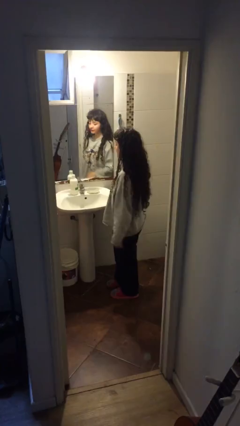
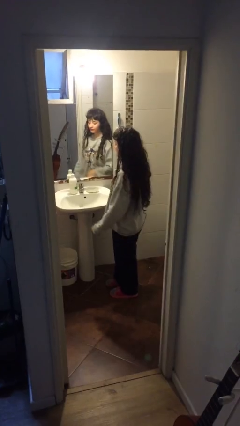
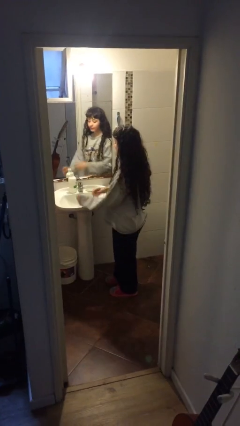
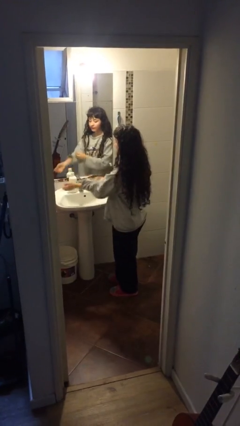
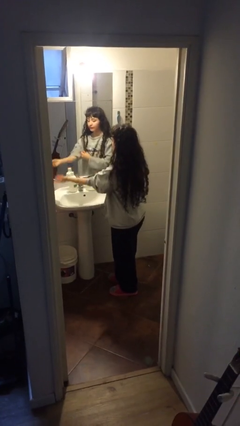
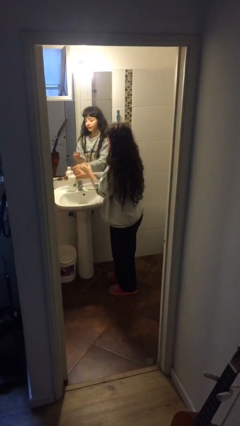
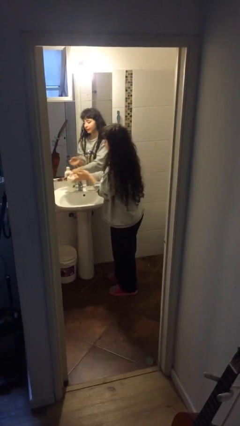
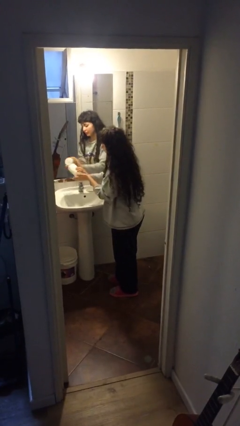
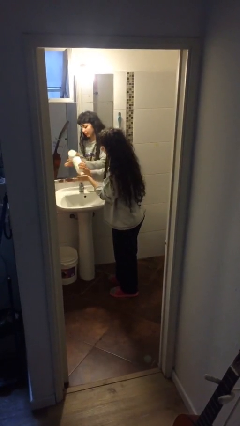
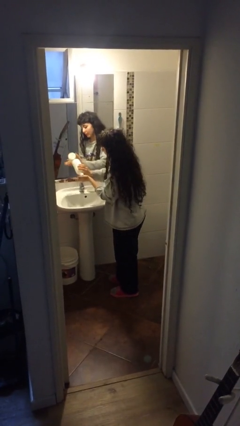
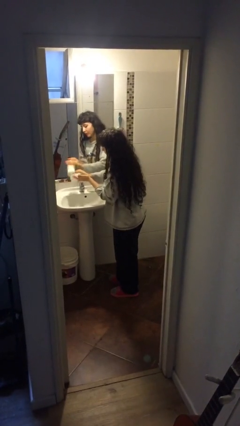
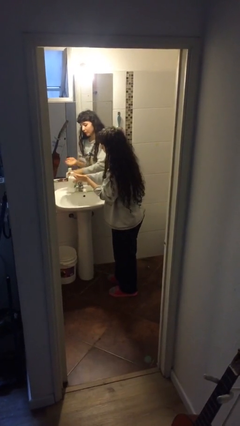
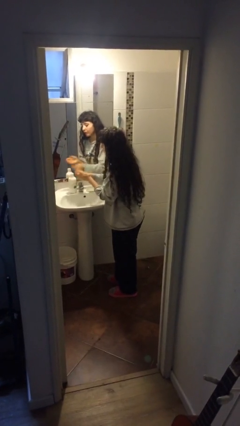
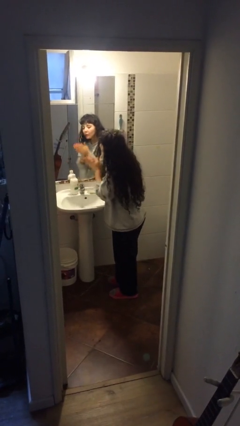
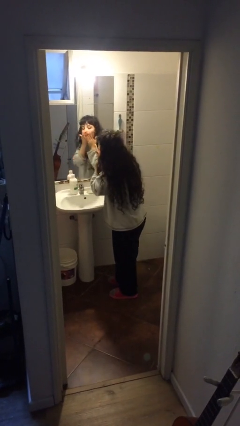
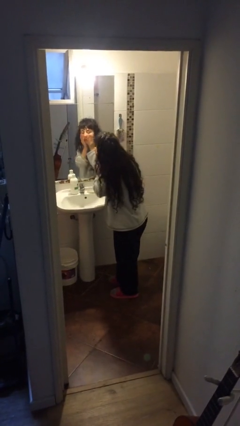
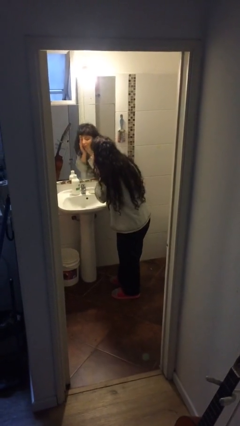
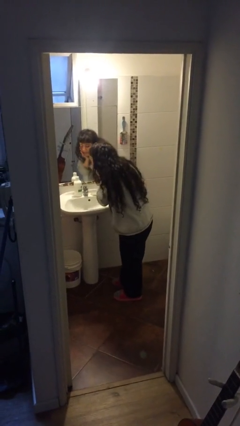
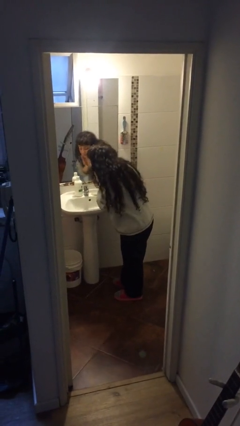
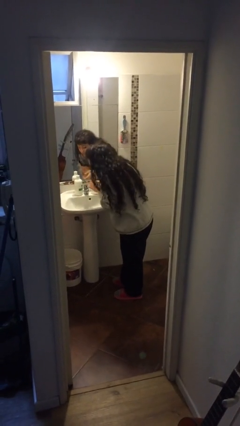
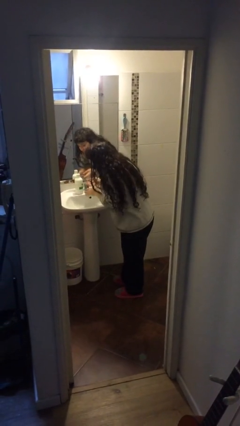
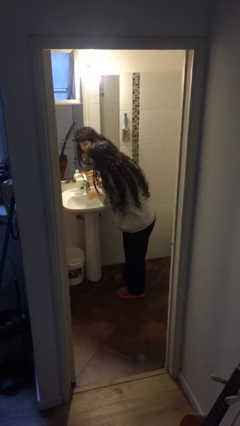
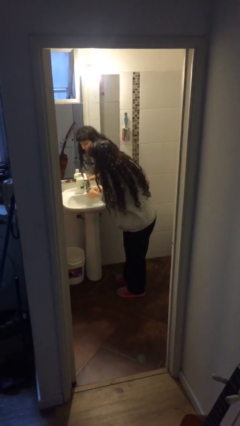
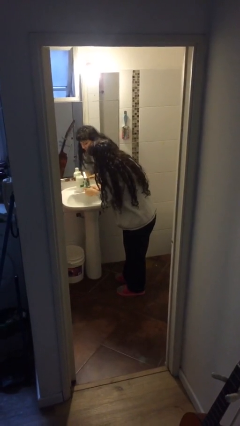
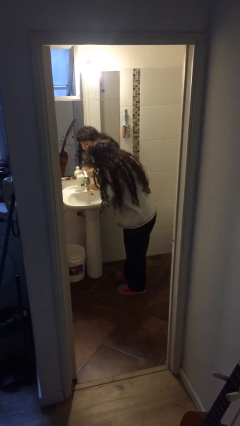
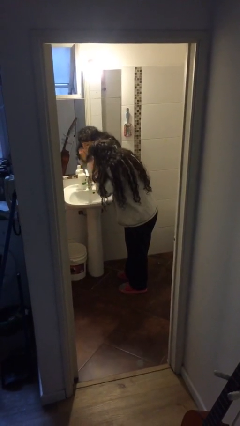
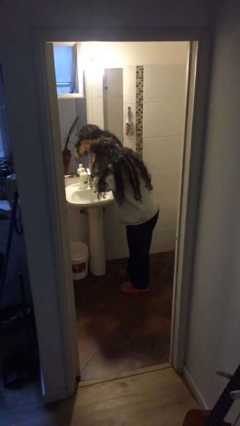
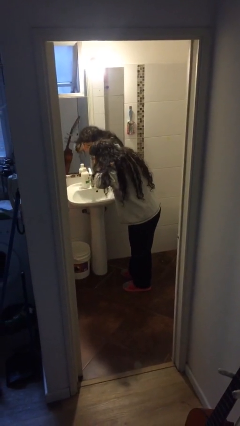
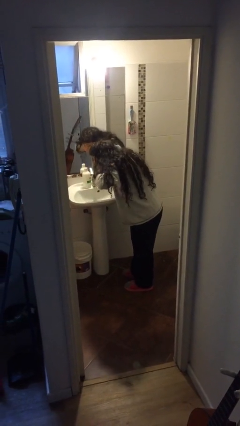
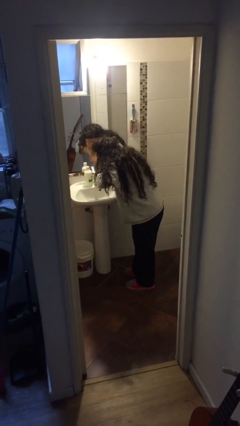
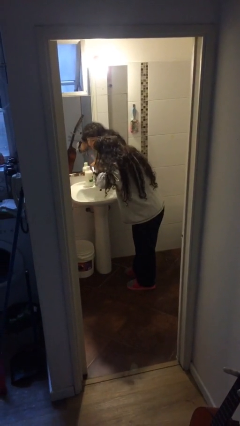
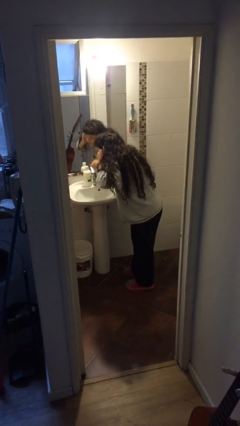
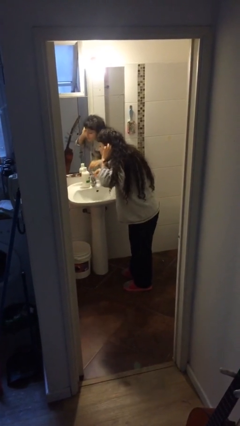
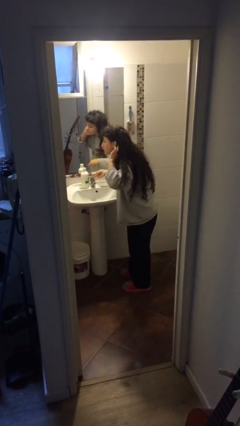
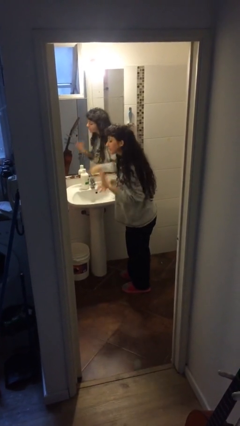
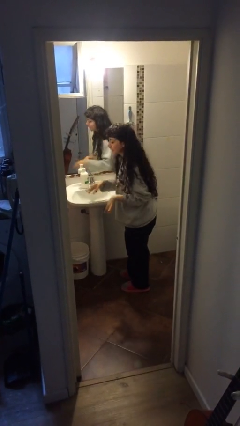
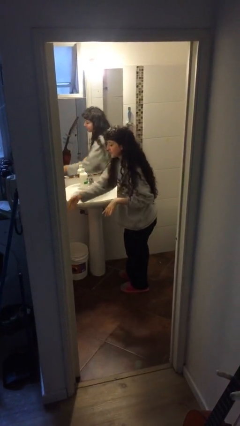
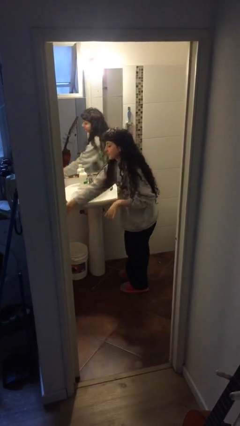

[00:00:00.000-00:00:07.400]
person washes face

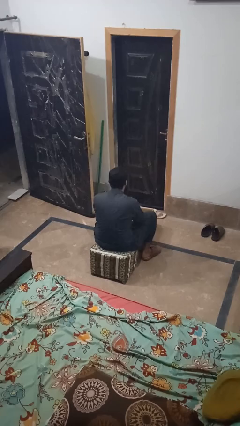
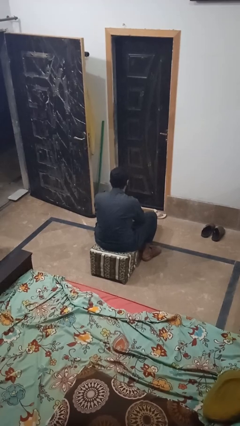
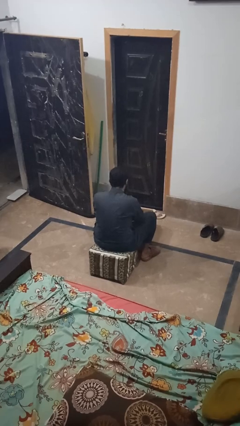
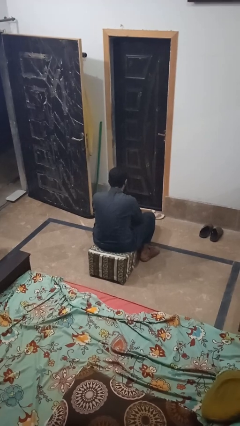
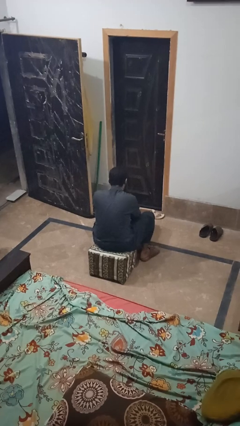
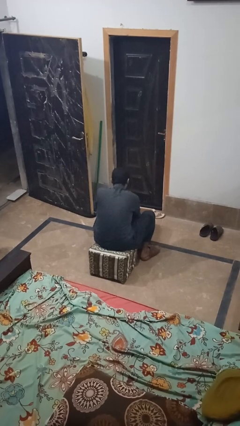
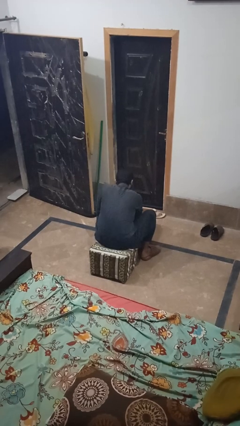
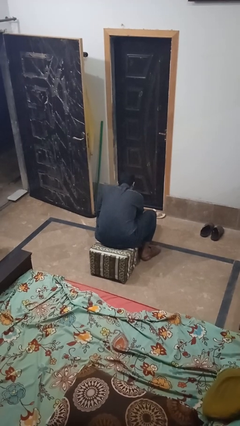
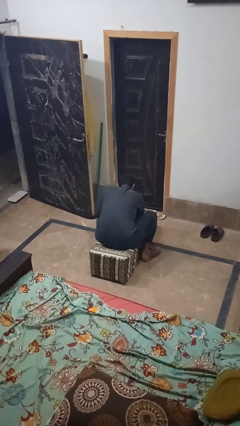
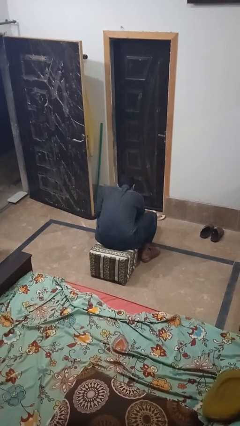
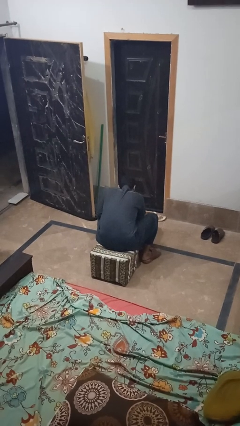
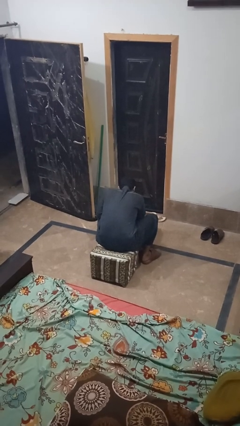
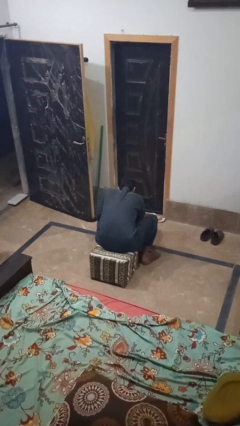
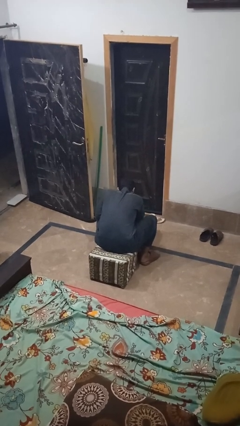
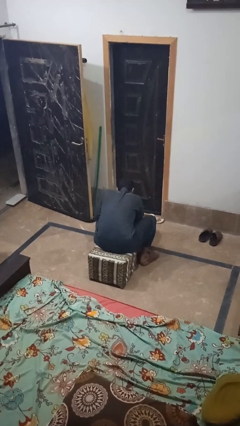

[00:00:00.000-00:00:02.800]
person searches in box

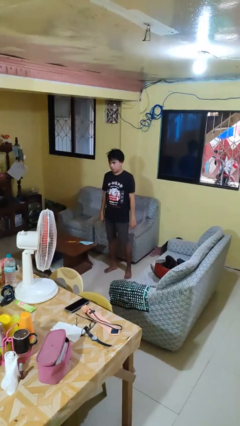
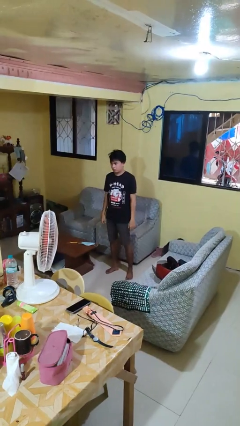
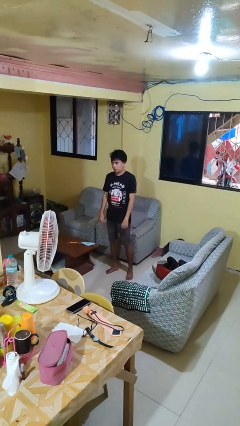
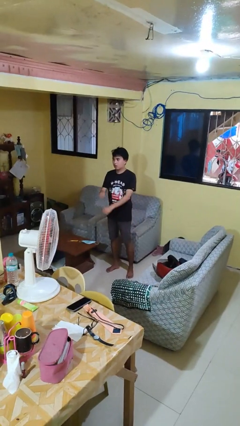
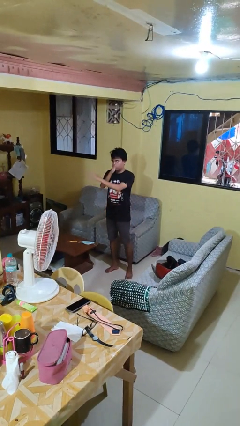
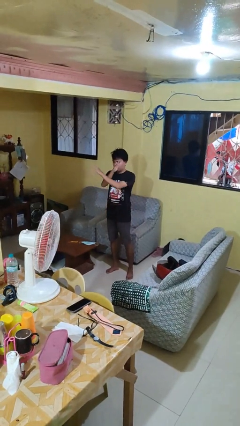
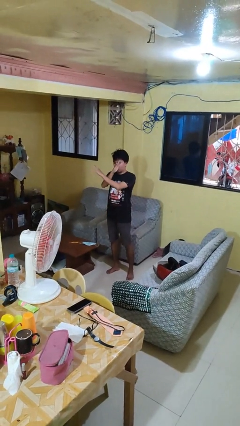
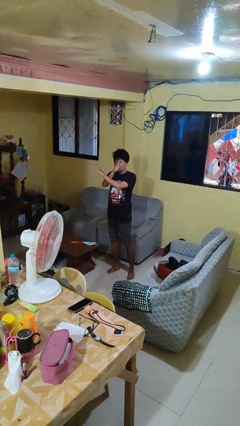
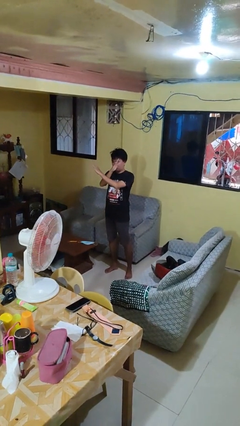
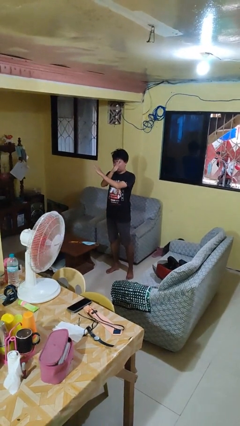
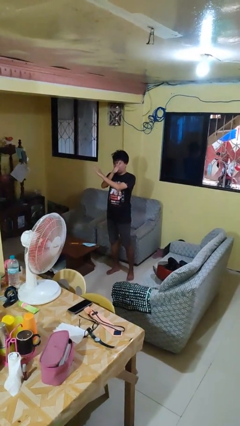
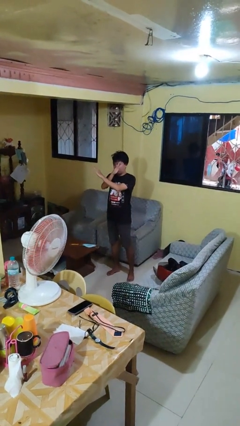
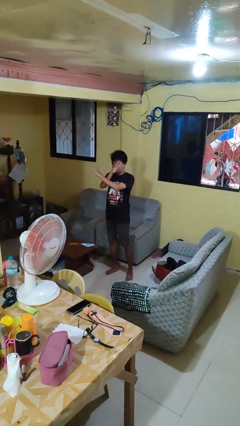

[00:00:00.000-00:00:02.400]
person gestures arms x

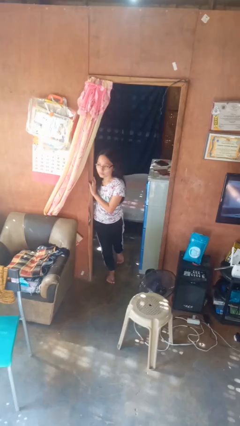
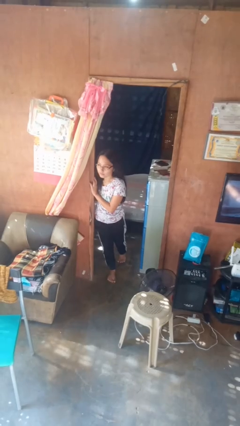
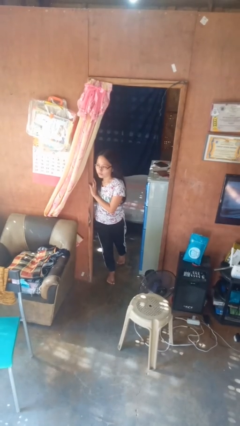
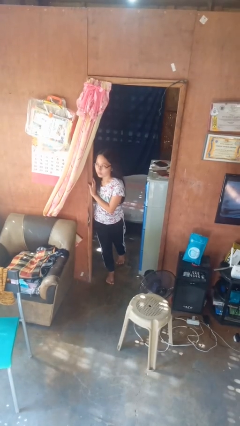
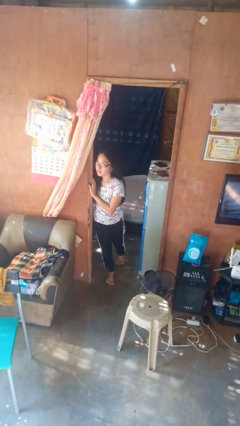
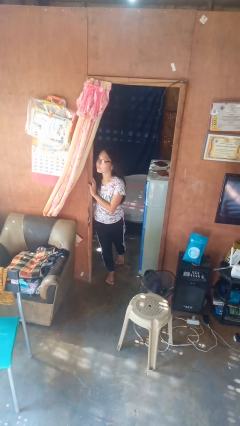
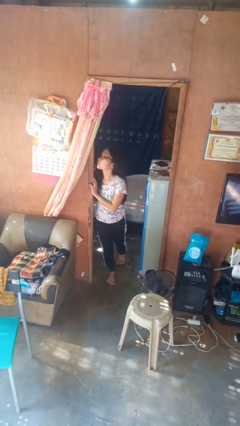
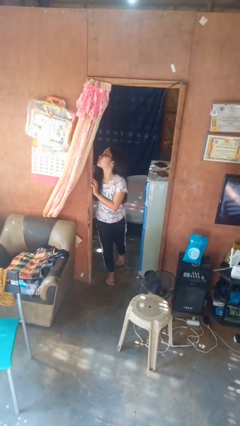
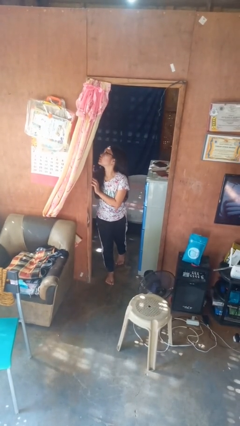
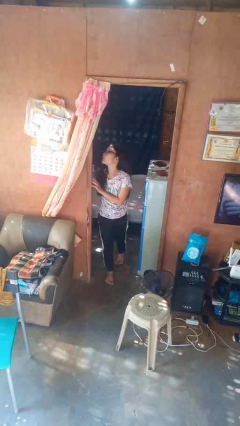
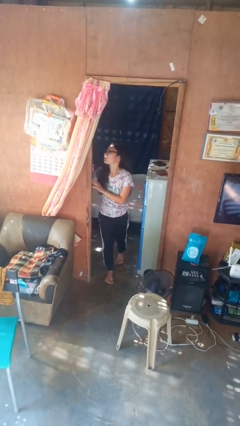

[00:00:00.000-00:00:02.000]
person bumps into wall

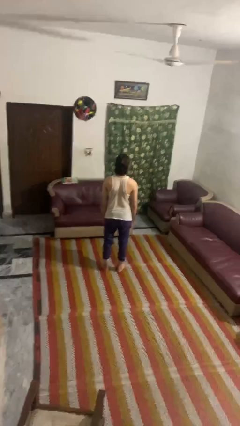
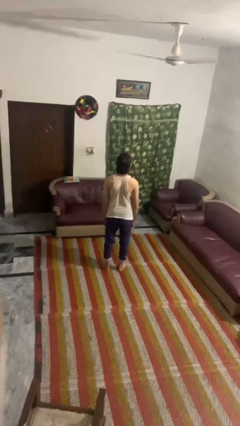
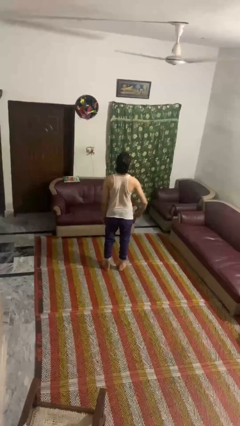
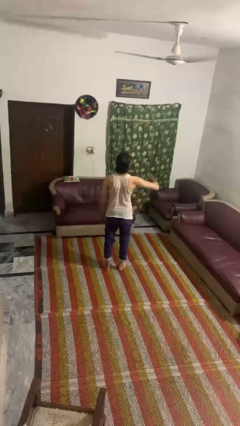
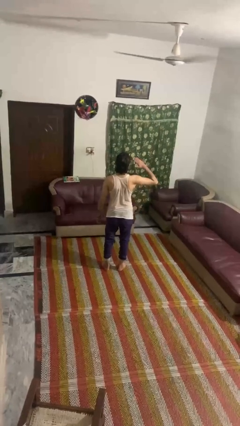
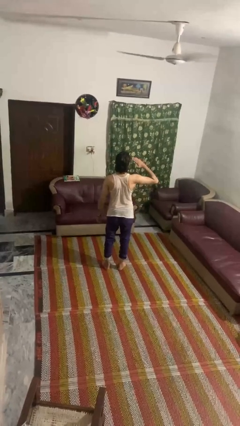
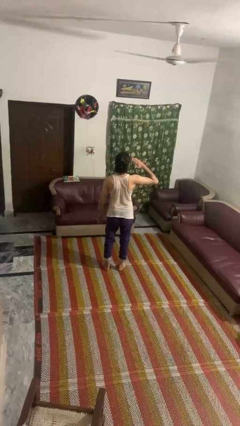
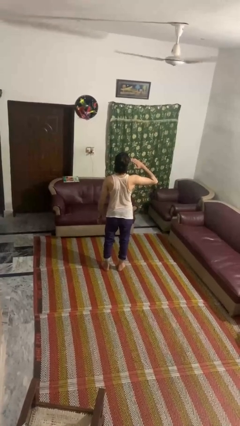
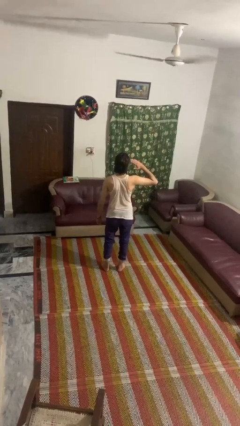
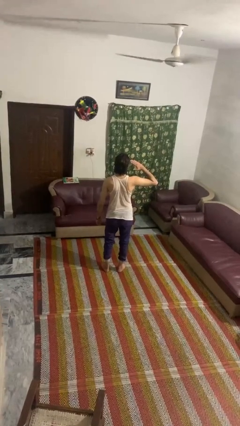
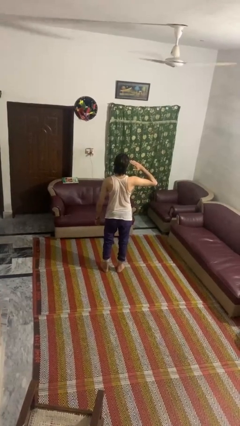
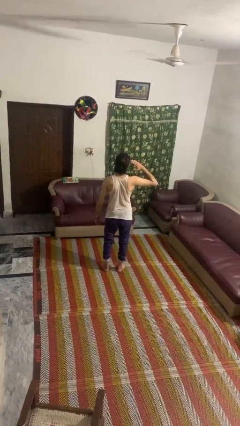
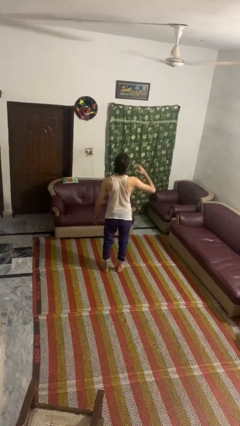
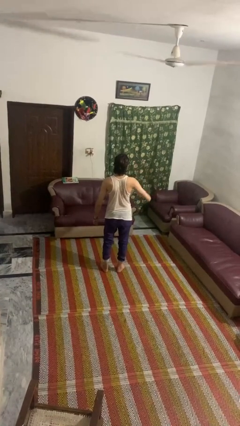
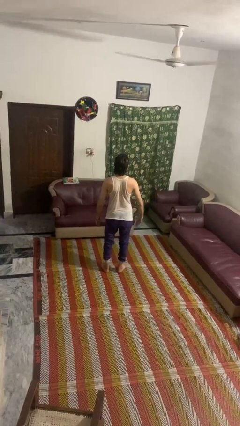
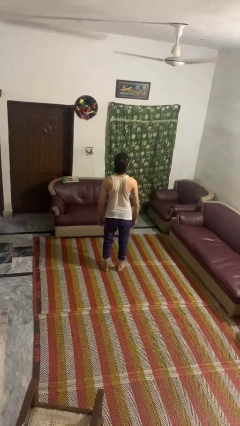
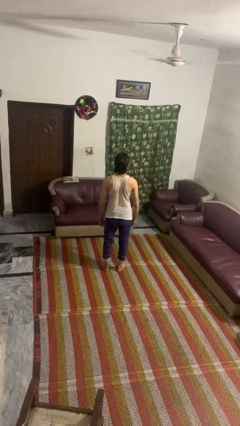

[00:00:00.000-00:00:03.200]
person salutes
